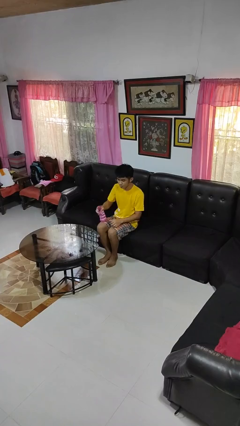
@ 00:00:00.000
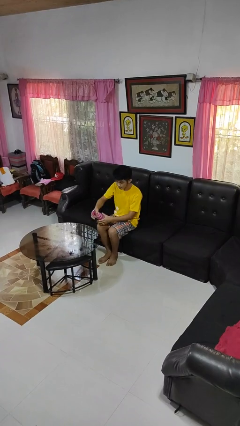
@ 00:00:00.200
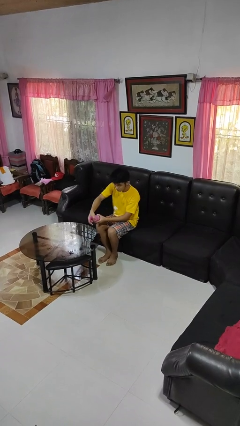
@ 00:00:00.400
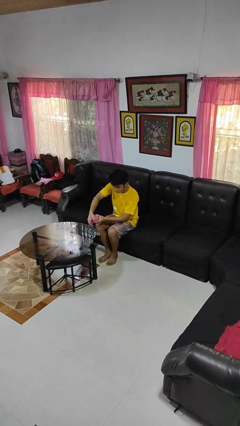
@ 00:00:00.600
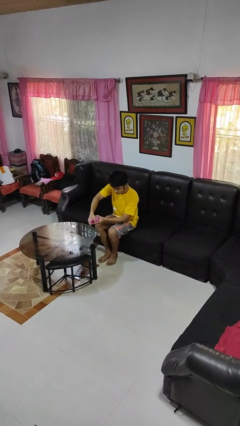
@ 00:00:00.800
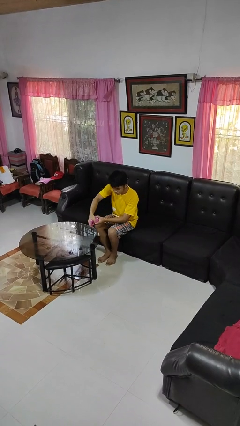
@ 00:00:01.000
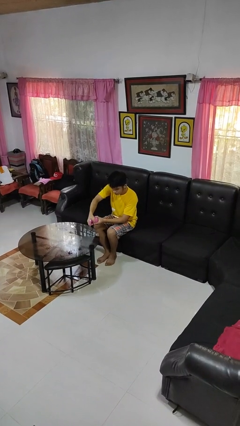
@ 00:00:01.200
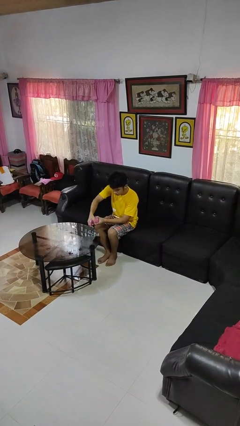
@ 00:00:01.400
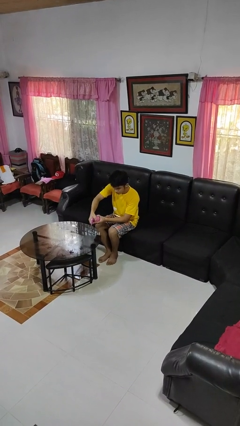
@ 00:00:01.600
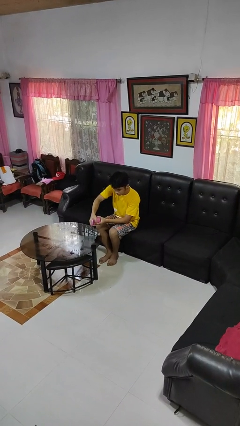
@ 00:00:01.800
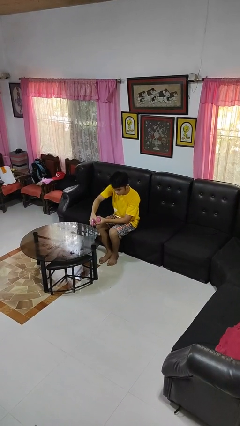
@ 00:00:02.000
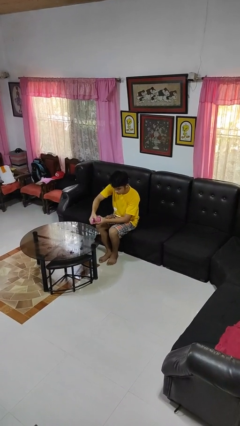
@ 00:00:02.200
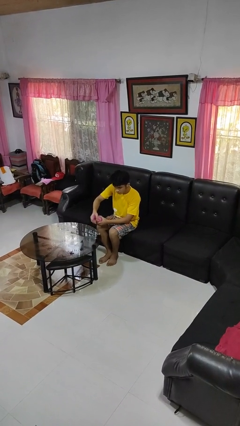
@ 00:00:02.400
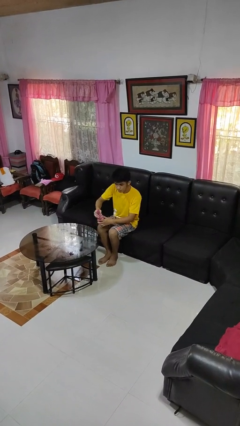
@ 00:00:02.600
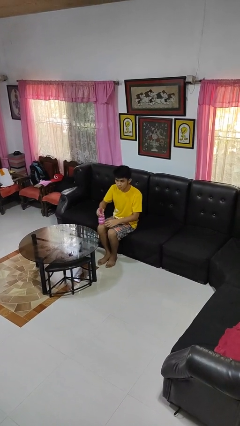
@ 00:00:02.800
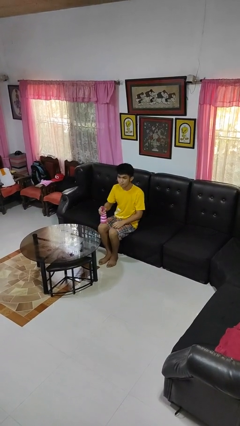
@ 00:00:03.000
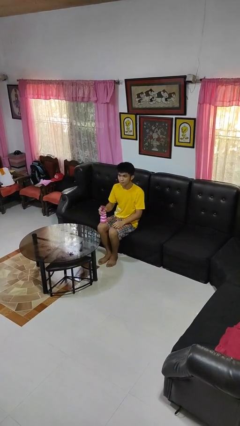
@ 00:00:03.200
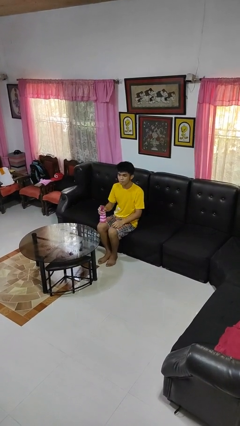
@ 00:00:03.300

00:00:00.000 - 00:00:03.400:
person sprays from bottle

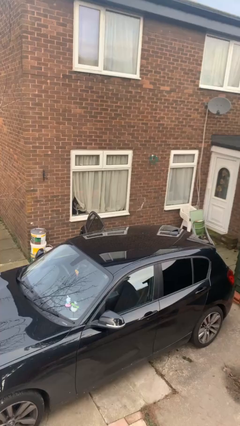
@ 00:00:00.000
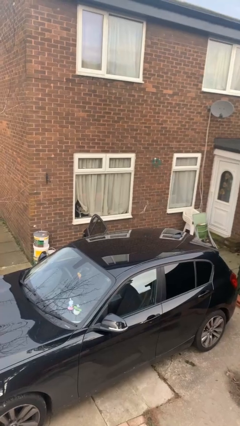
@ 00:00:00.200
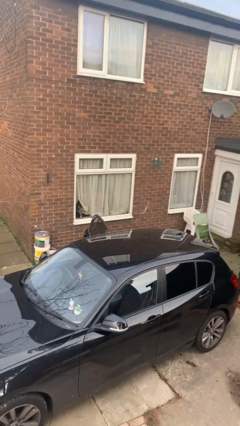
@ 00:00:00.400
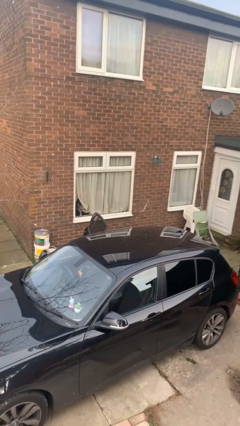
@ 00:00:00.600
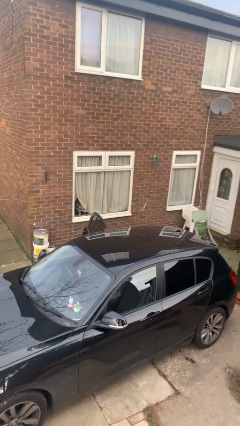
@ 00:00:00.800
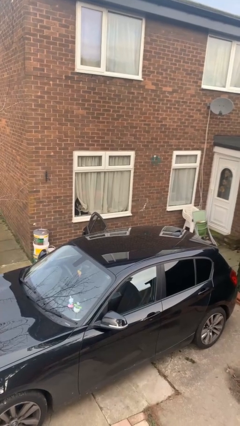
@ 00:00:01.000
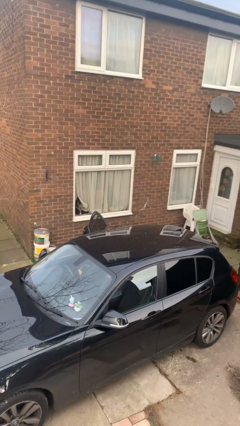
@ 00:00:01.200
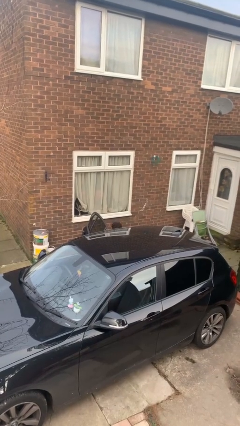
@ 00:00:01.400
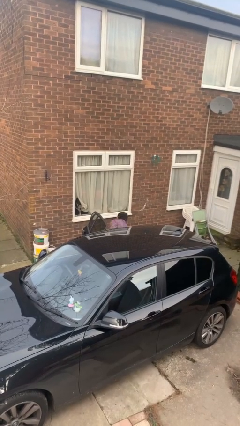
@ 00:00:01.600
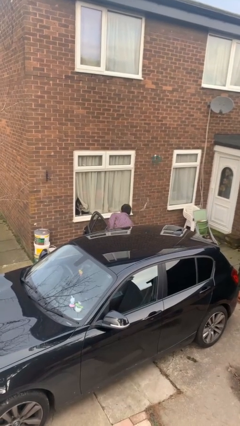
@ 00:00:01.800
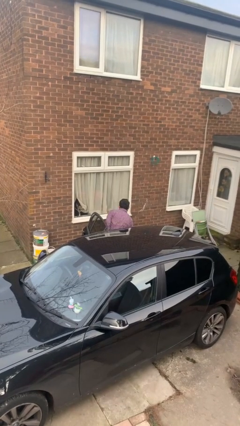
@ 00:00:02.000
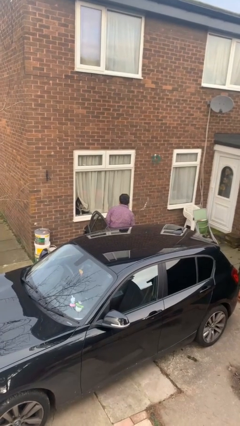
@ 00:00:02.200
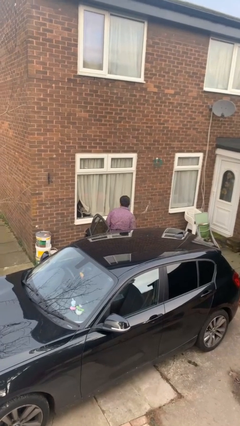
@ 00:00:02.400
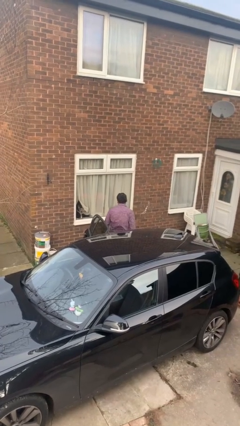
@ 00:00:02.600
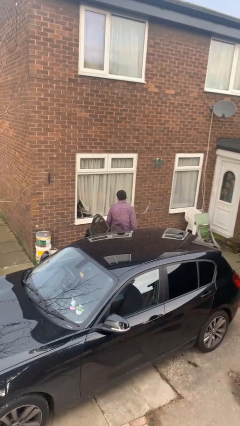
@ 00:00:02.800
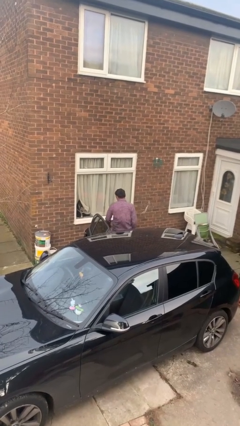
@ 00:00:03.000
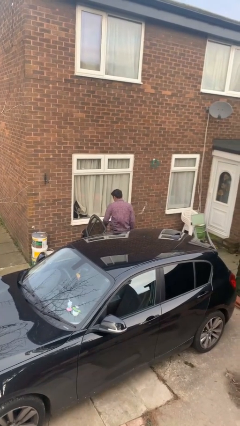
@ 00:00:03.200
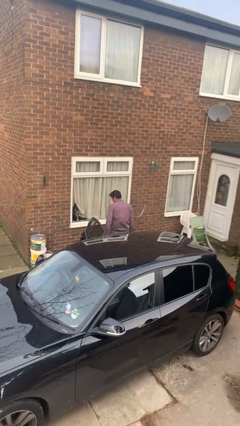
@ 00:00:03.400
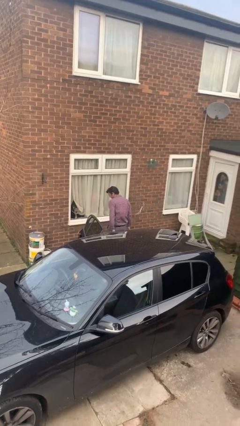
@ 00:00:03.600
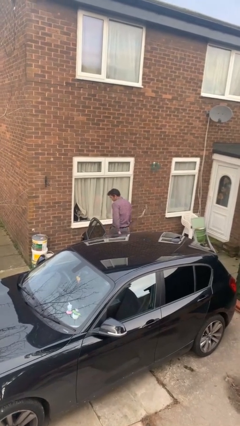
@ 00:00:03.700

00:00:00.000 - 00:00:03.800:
person exits car

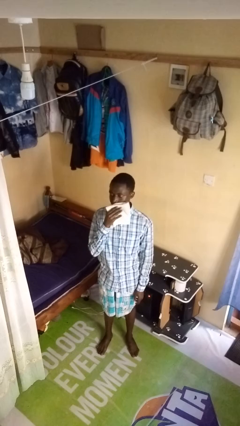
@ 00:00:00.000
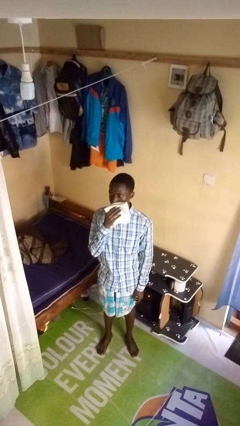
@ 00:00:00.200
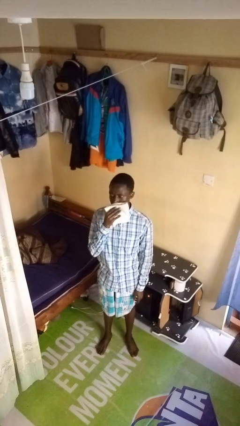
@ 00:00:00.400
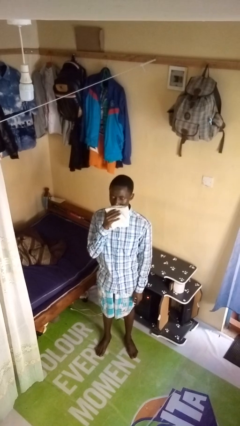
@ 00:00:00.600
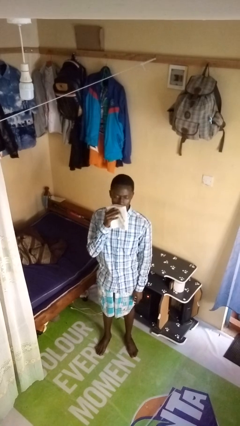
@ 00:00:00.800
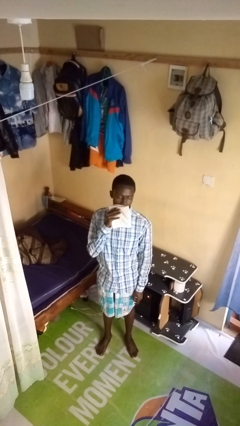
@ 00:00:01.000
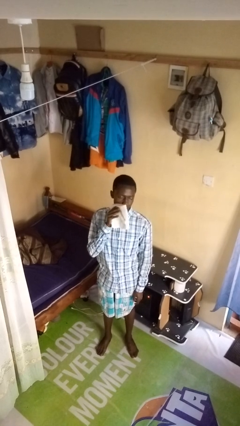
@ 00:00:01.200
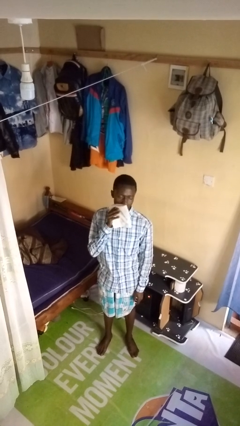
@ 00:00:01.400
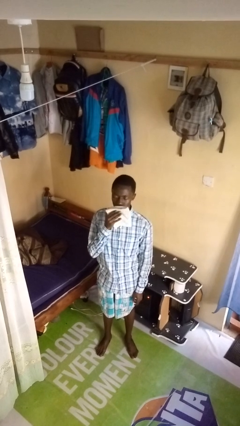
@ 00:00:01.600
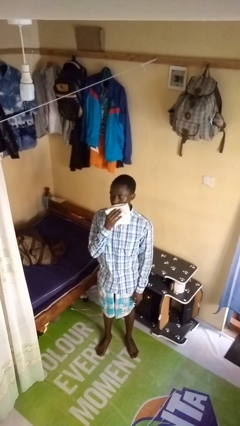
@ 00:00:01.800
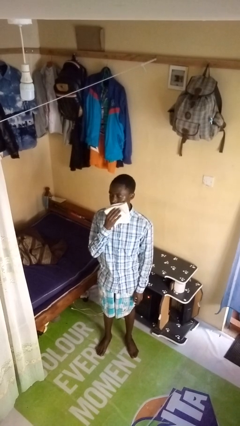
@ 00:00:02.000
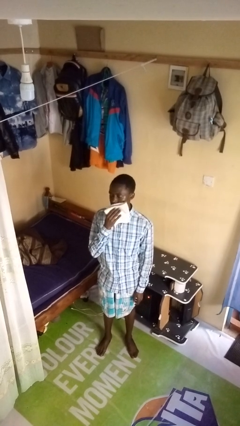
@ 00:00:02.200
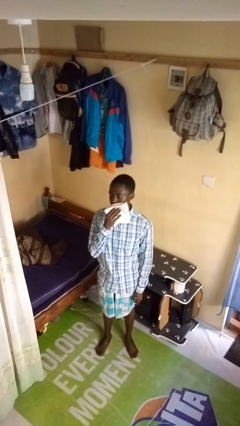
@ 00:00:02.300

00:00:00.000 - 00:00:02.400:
person wipes mouth with napkin

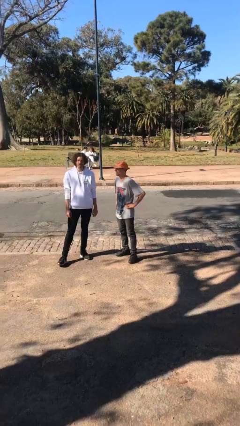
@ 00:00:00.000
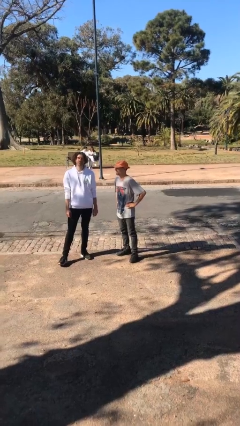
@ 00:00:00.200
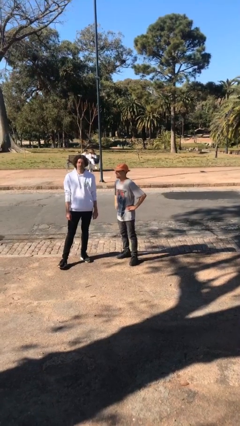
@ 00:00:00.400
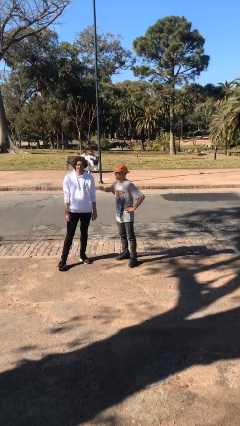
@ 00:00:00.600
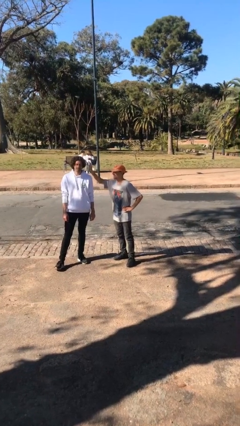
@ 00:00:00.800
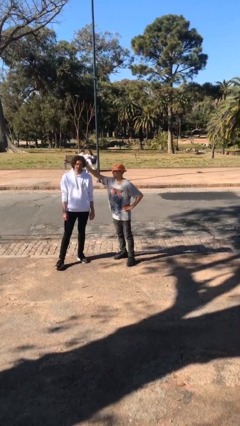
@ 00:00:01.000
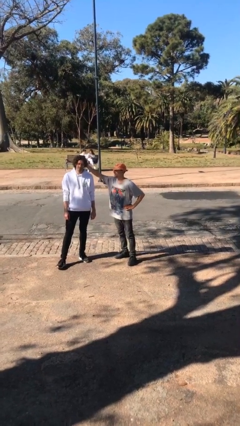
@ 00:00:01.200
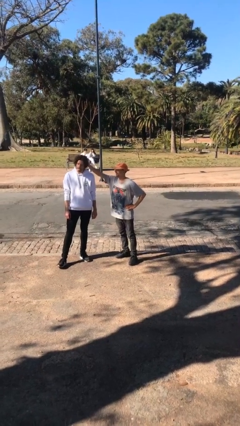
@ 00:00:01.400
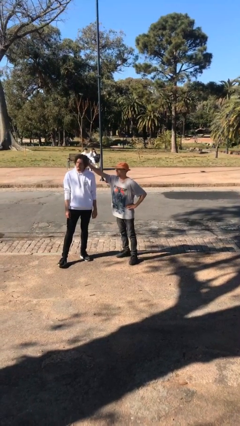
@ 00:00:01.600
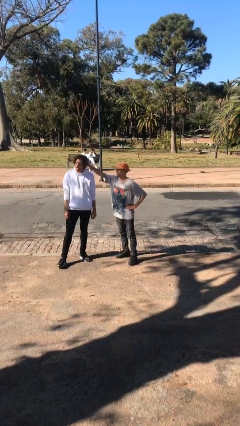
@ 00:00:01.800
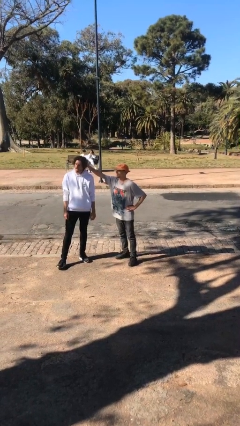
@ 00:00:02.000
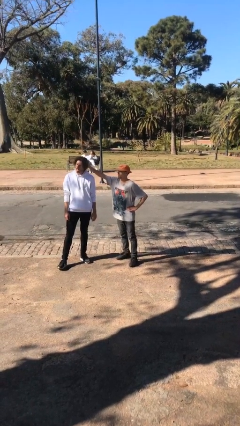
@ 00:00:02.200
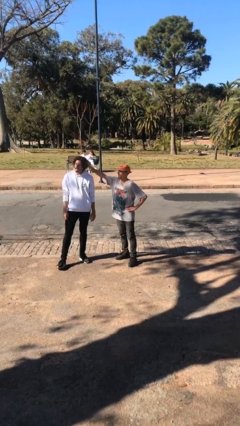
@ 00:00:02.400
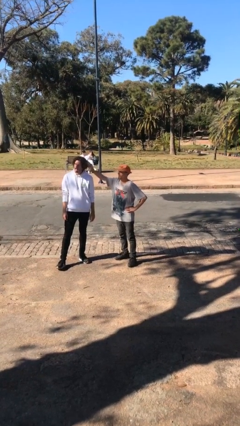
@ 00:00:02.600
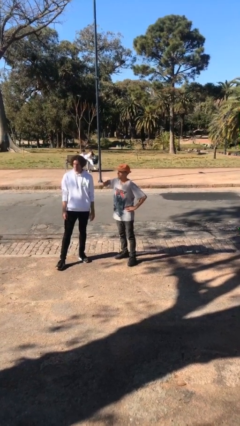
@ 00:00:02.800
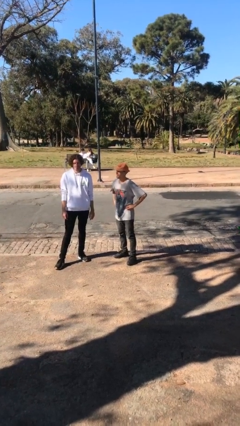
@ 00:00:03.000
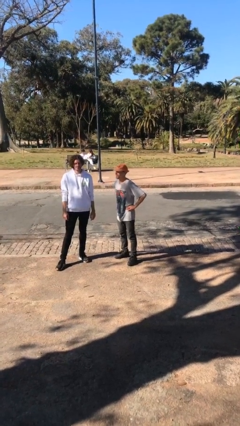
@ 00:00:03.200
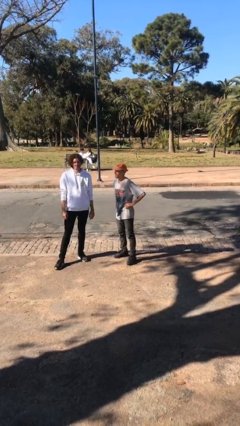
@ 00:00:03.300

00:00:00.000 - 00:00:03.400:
person grabs person by hair

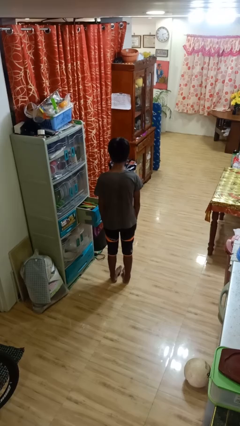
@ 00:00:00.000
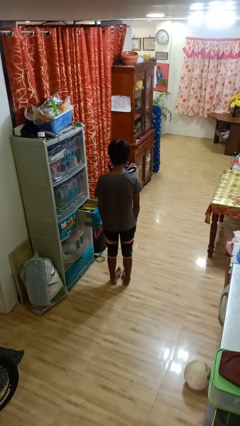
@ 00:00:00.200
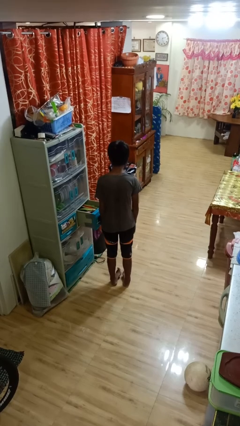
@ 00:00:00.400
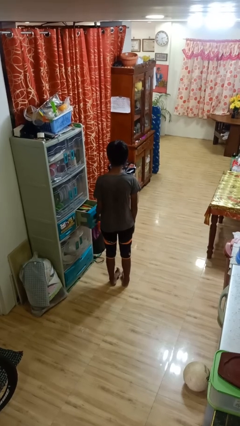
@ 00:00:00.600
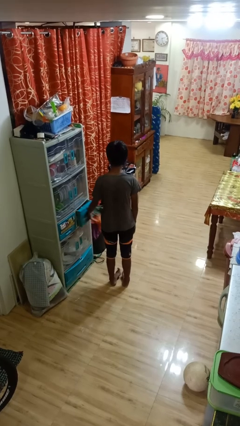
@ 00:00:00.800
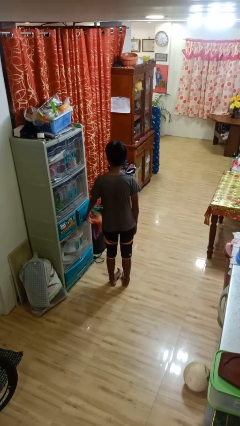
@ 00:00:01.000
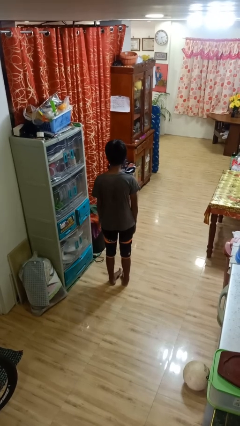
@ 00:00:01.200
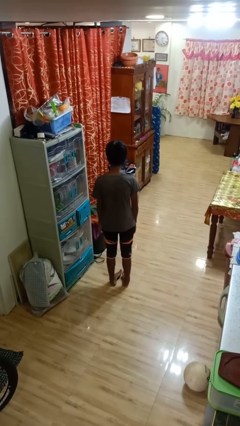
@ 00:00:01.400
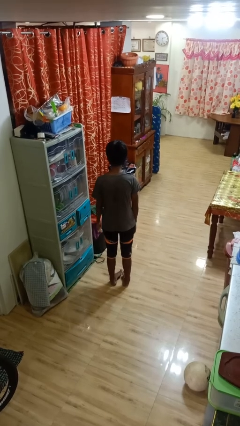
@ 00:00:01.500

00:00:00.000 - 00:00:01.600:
person closes kitchen drawer

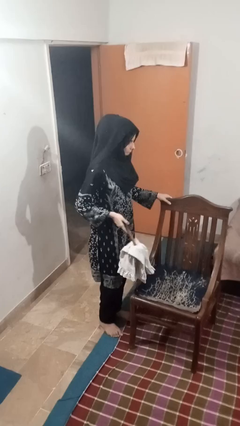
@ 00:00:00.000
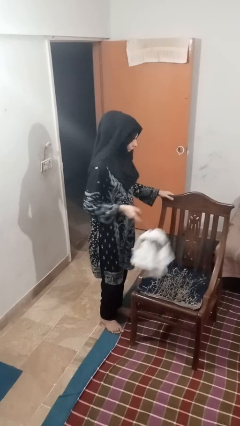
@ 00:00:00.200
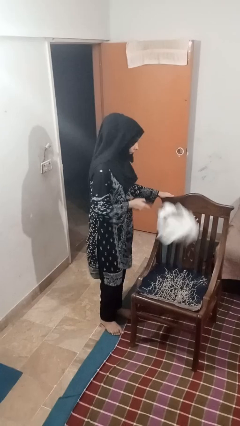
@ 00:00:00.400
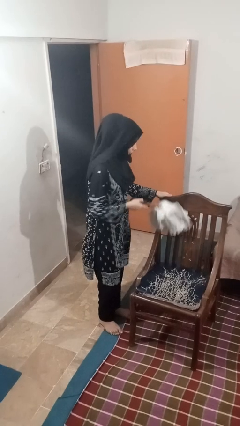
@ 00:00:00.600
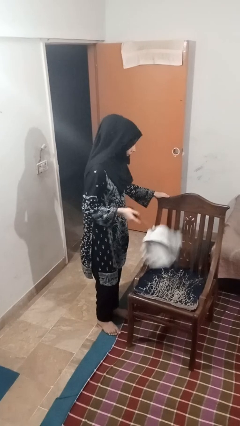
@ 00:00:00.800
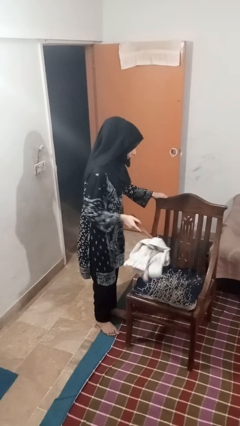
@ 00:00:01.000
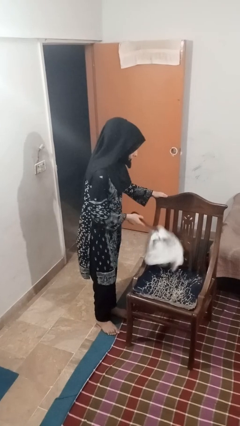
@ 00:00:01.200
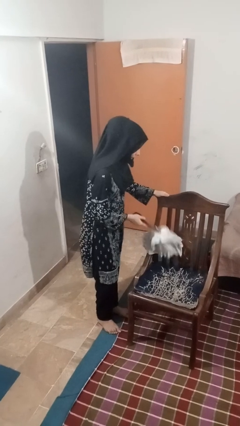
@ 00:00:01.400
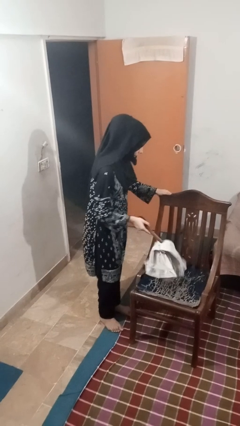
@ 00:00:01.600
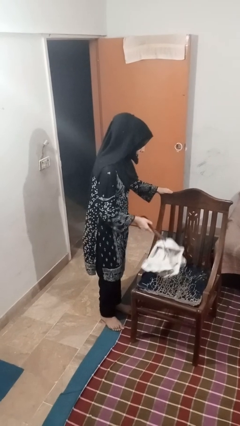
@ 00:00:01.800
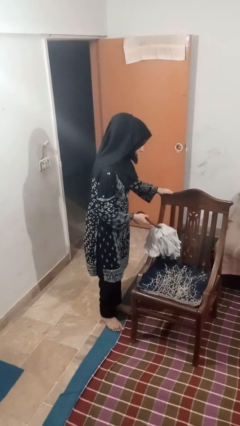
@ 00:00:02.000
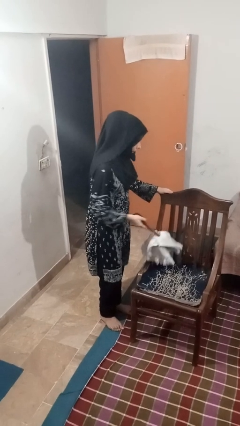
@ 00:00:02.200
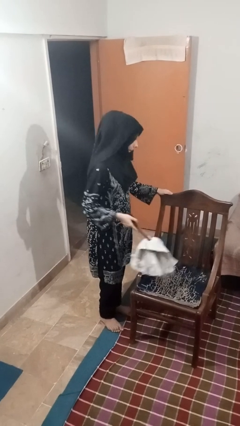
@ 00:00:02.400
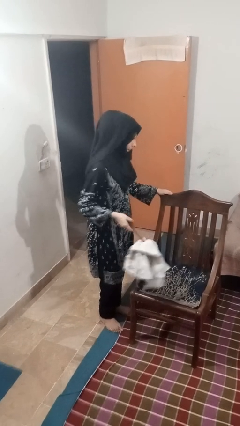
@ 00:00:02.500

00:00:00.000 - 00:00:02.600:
person dusts furniture
